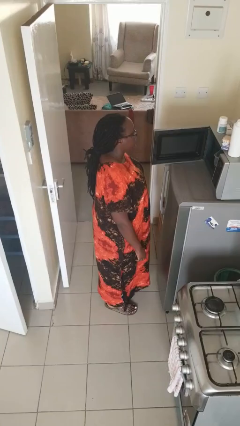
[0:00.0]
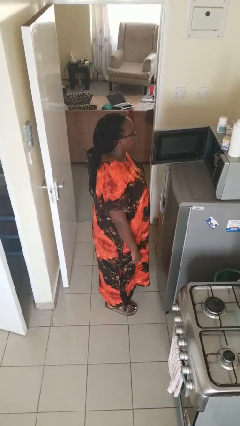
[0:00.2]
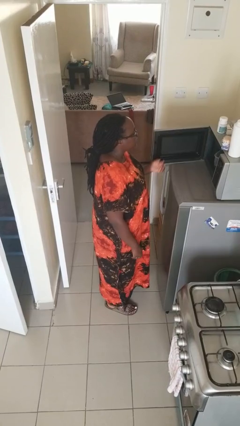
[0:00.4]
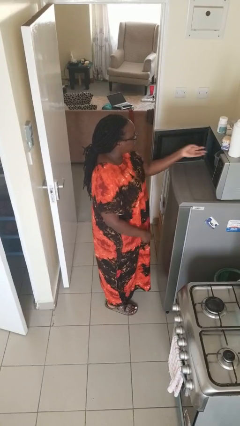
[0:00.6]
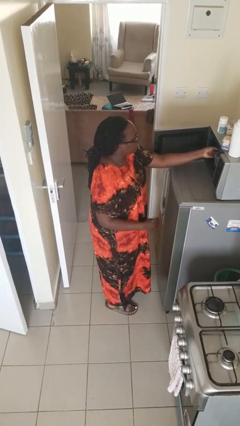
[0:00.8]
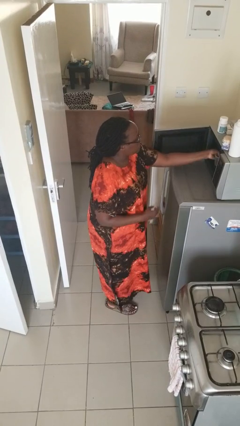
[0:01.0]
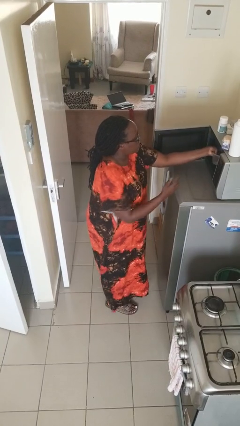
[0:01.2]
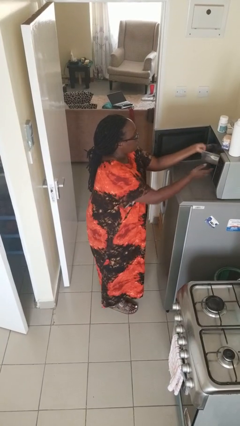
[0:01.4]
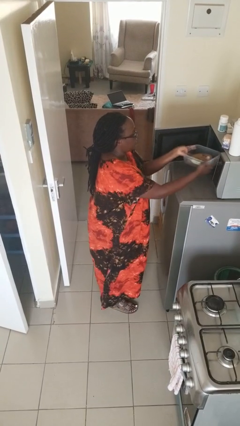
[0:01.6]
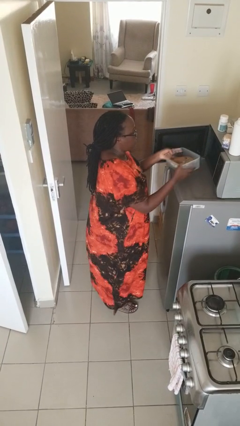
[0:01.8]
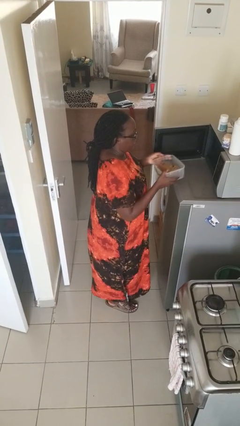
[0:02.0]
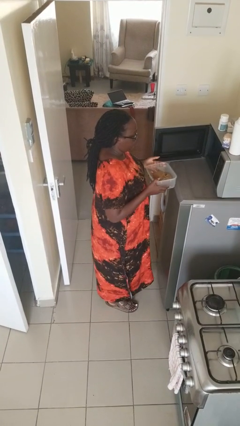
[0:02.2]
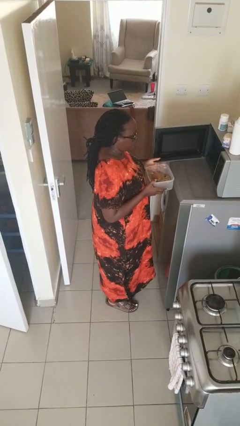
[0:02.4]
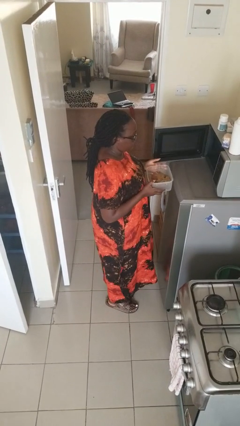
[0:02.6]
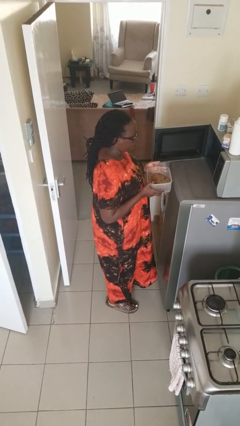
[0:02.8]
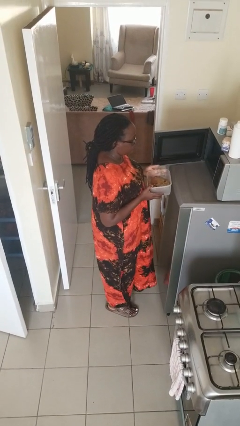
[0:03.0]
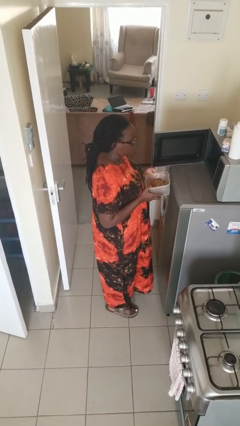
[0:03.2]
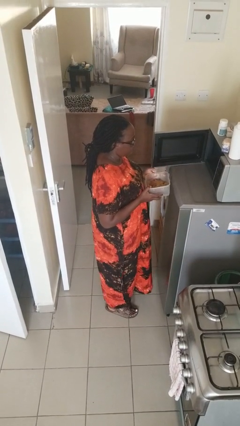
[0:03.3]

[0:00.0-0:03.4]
person takes object from microwave

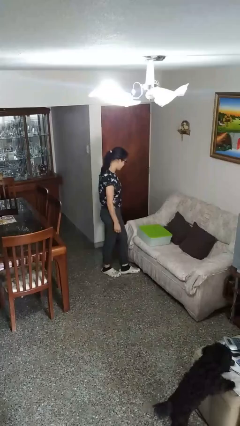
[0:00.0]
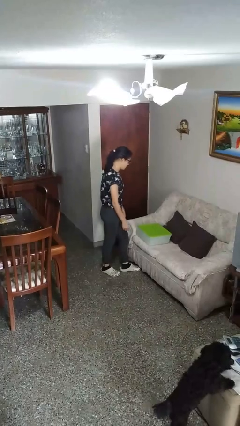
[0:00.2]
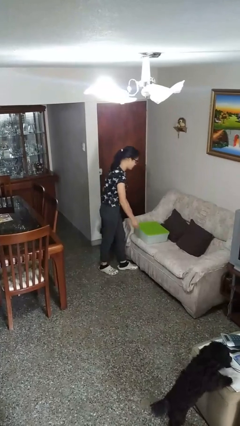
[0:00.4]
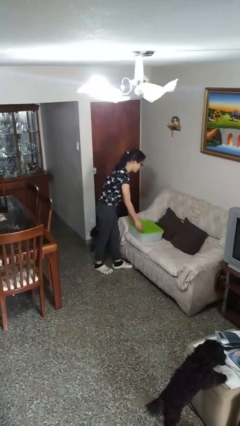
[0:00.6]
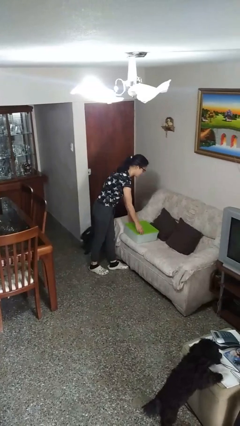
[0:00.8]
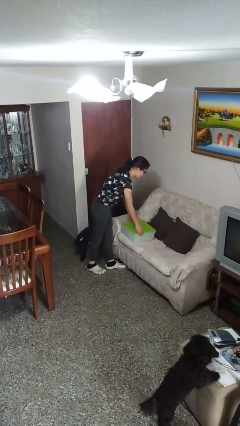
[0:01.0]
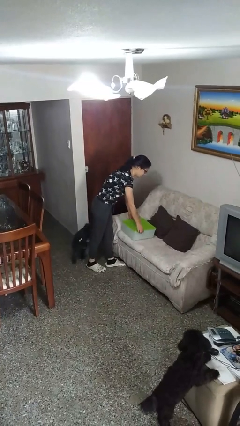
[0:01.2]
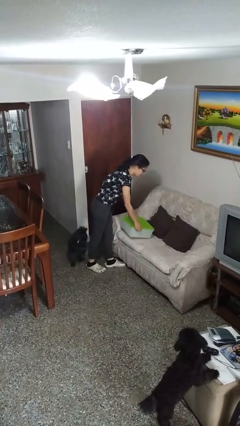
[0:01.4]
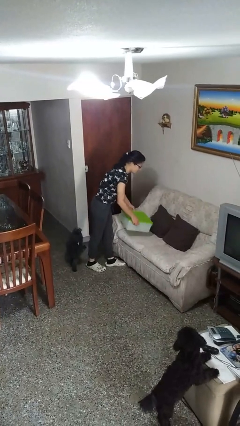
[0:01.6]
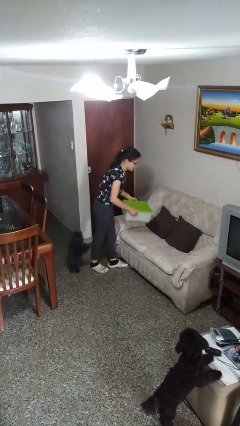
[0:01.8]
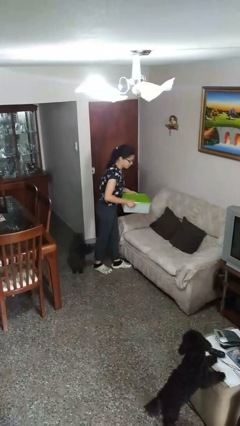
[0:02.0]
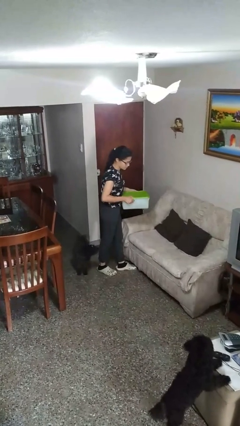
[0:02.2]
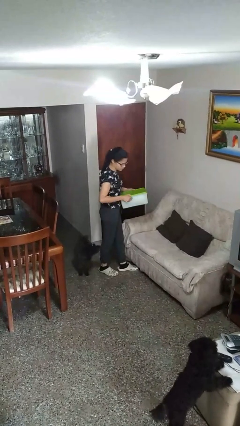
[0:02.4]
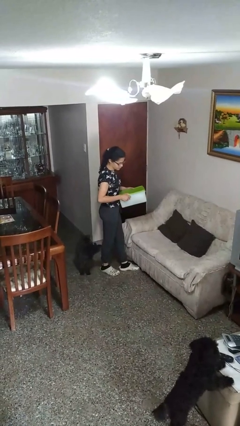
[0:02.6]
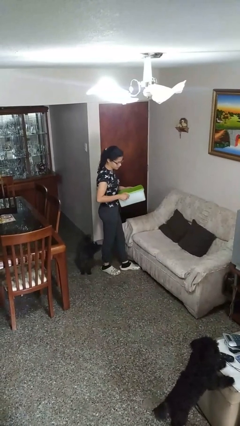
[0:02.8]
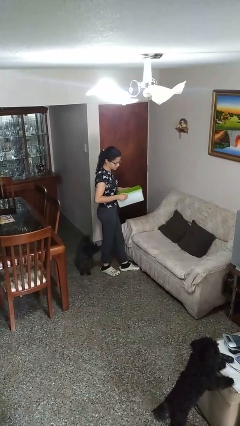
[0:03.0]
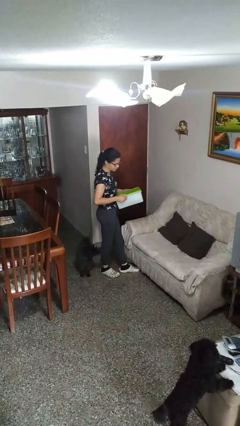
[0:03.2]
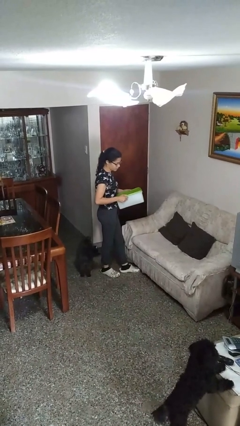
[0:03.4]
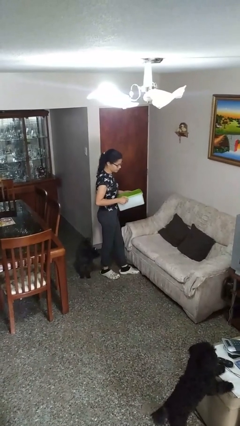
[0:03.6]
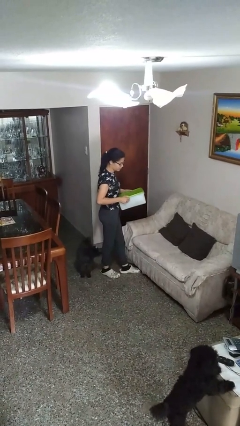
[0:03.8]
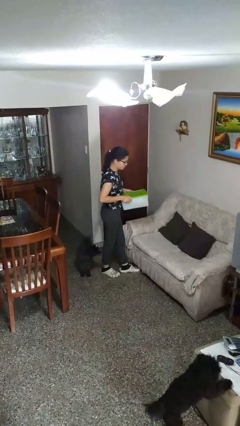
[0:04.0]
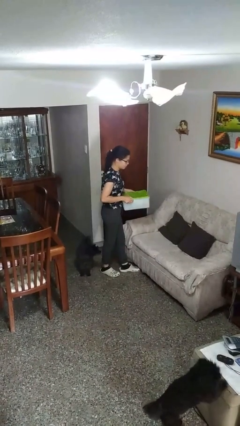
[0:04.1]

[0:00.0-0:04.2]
person picks up object from couch

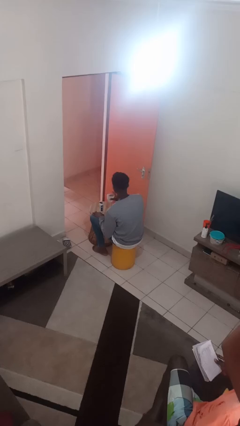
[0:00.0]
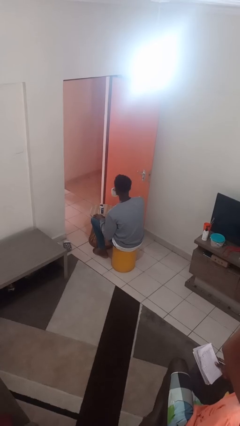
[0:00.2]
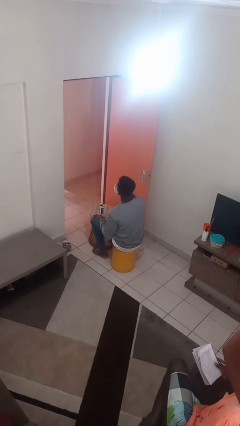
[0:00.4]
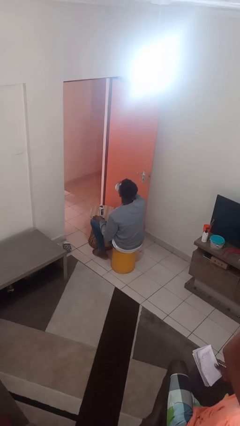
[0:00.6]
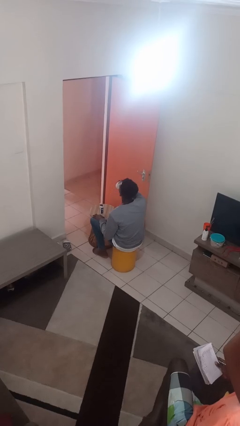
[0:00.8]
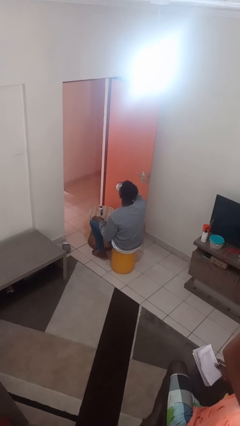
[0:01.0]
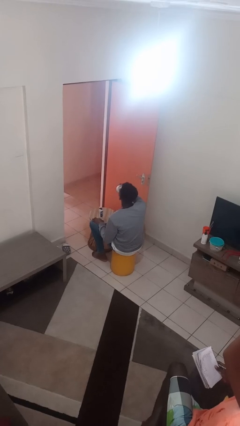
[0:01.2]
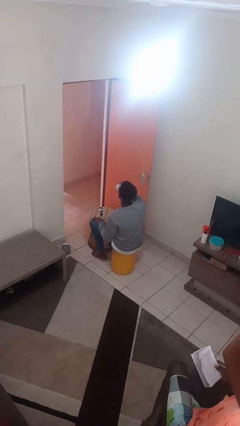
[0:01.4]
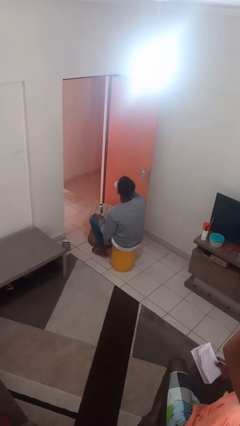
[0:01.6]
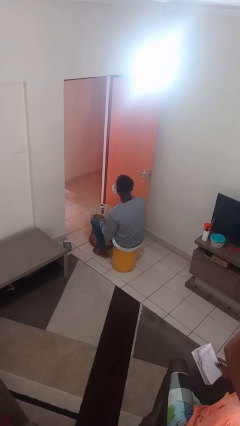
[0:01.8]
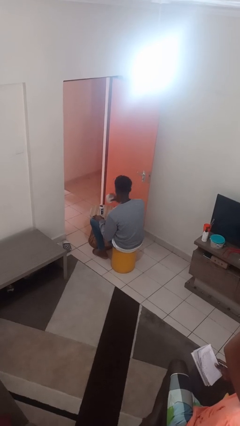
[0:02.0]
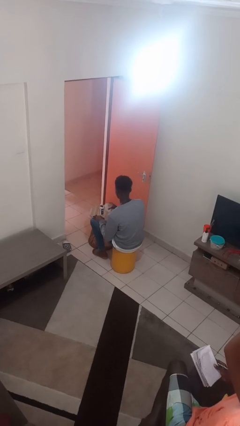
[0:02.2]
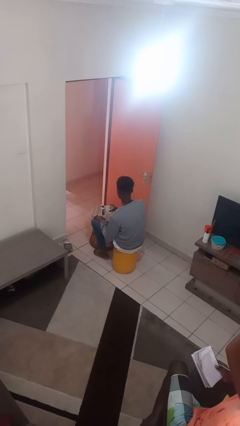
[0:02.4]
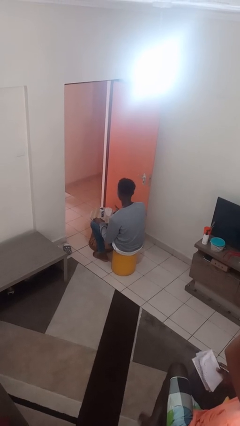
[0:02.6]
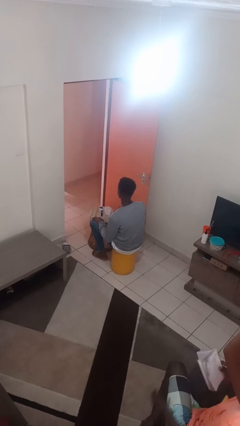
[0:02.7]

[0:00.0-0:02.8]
person drinks from cup

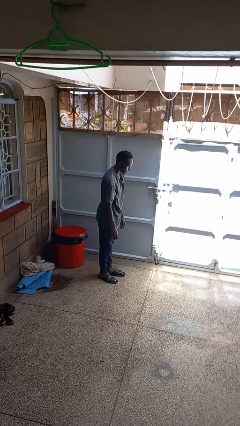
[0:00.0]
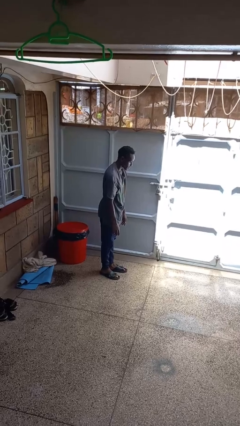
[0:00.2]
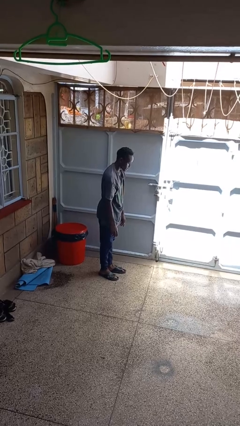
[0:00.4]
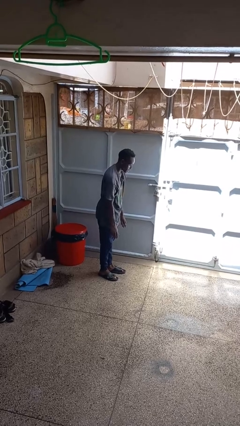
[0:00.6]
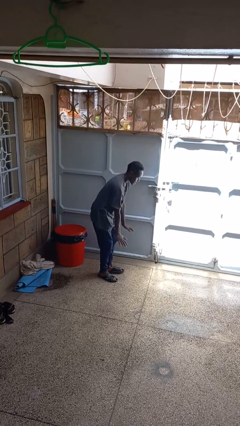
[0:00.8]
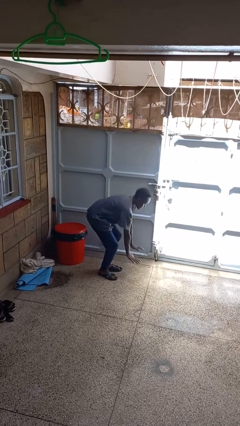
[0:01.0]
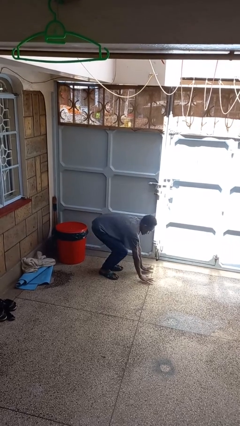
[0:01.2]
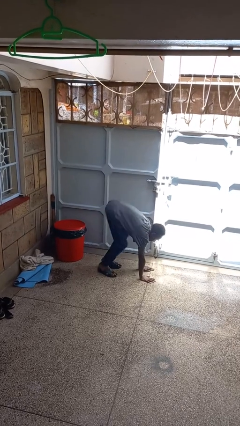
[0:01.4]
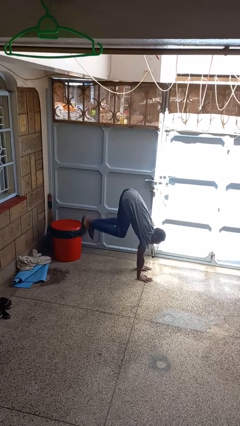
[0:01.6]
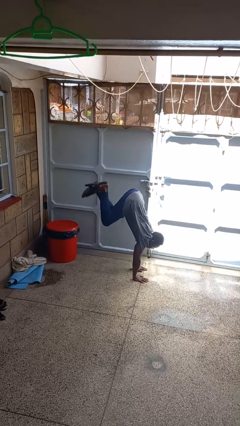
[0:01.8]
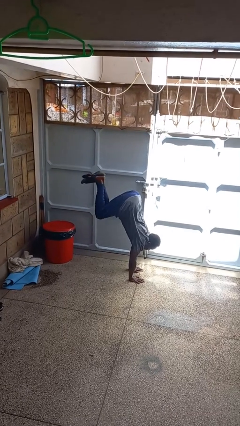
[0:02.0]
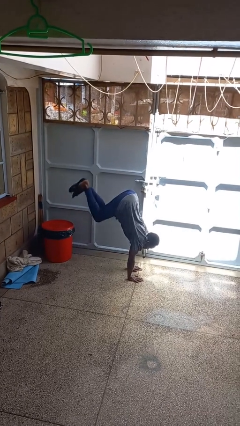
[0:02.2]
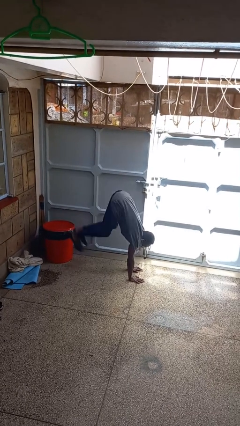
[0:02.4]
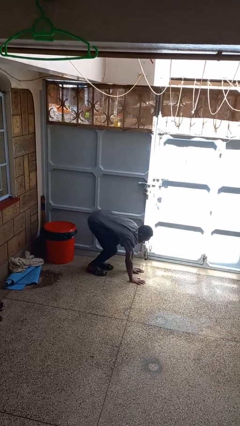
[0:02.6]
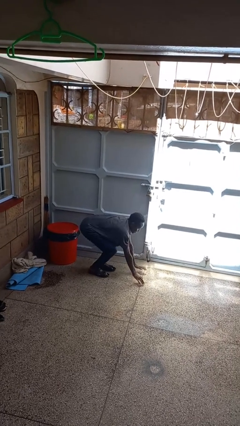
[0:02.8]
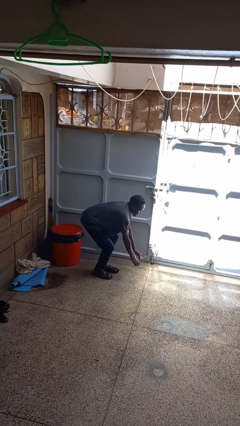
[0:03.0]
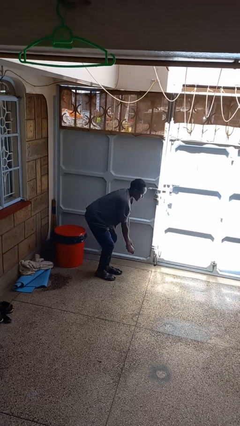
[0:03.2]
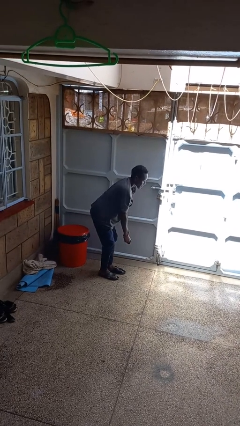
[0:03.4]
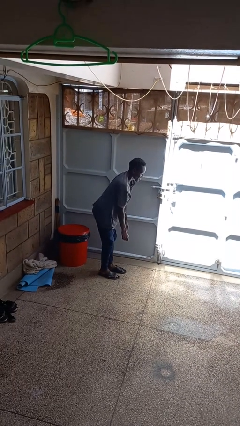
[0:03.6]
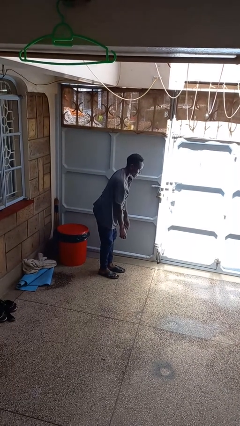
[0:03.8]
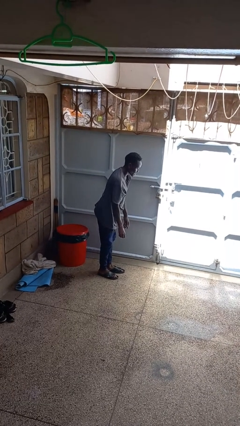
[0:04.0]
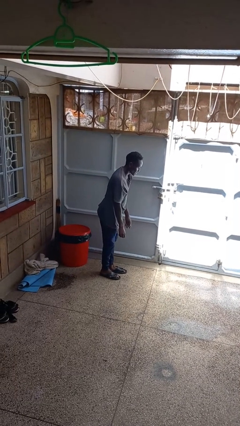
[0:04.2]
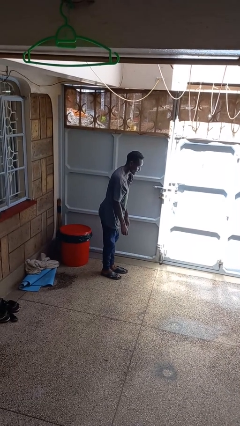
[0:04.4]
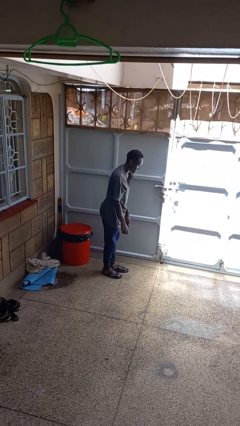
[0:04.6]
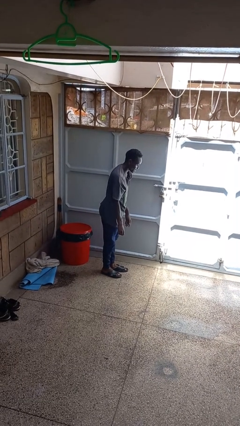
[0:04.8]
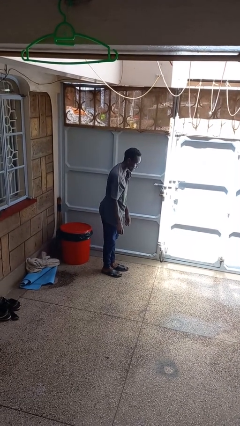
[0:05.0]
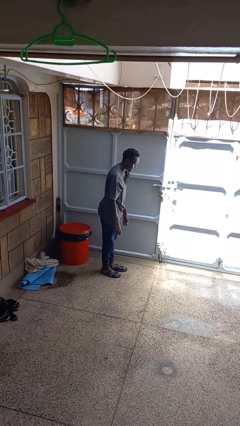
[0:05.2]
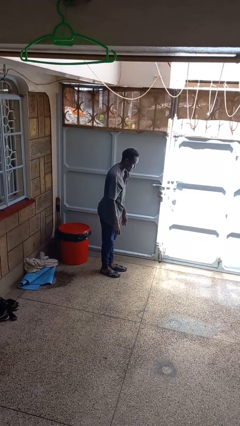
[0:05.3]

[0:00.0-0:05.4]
person handstand

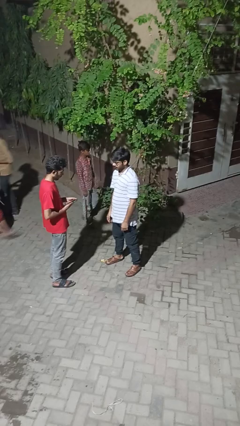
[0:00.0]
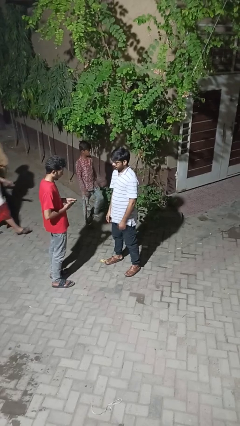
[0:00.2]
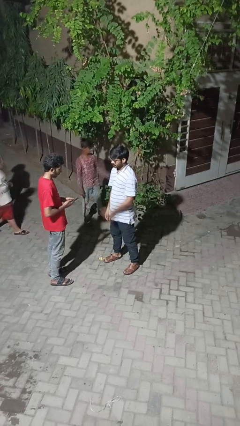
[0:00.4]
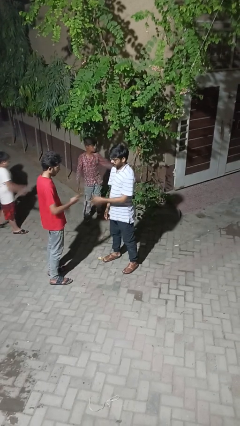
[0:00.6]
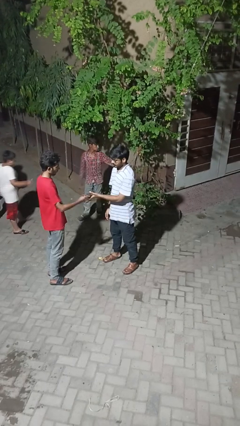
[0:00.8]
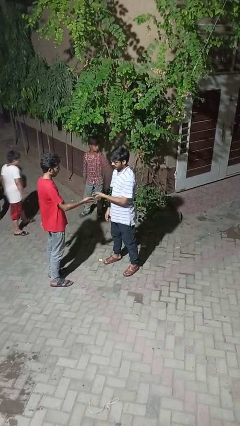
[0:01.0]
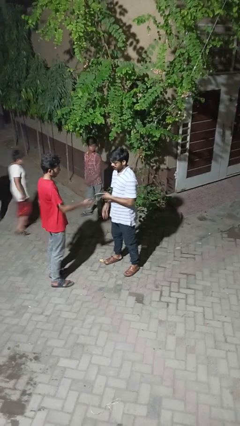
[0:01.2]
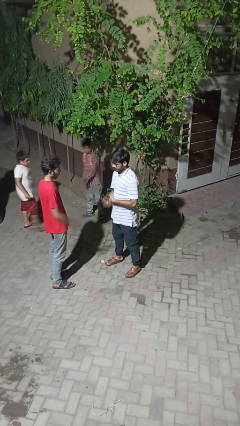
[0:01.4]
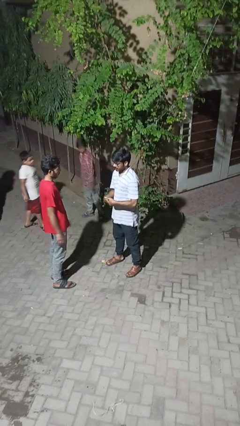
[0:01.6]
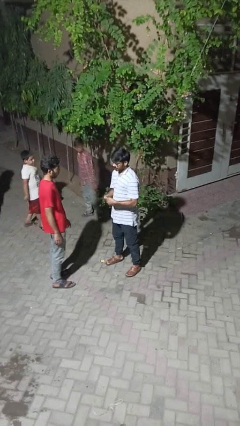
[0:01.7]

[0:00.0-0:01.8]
person transfers object to person
